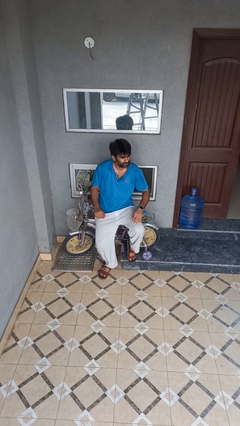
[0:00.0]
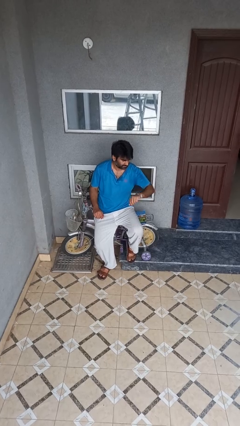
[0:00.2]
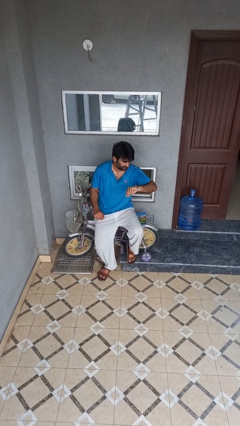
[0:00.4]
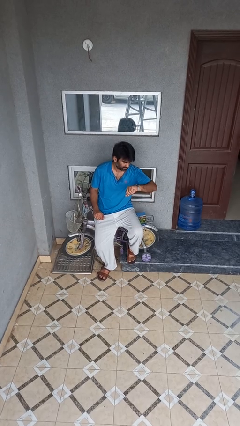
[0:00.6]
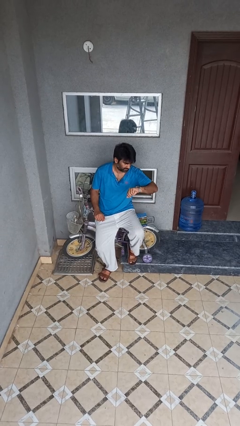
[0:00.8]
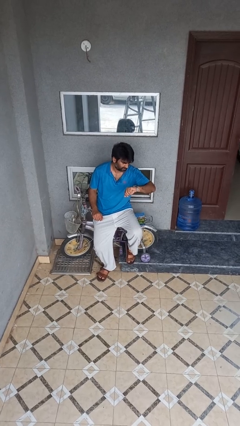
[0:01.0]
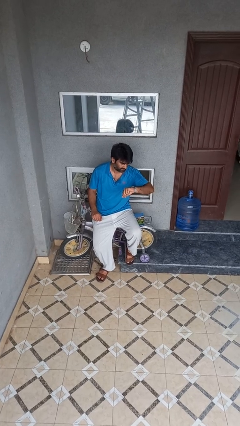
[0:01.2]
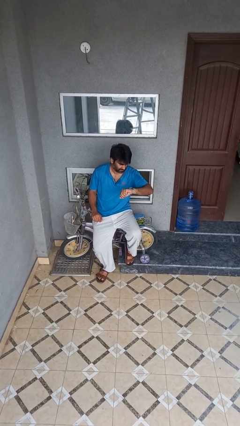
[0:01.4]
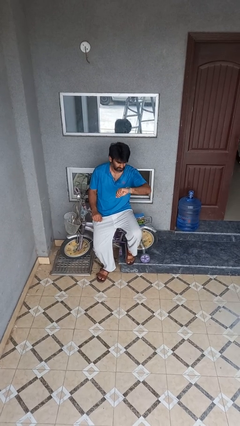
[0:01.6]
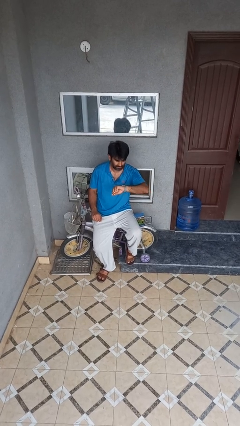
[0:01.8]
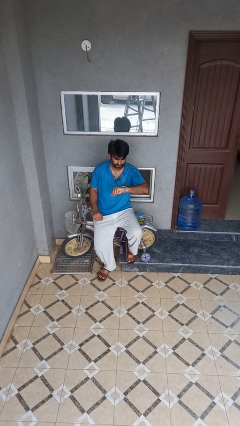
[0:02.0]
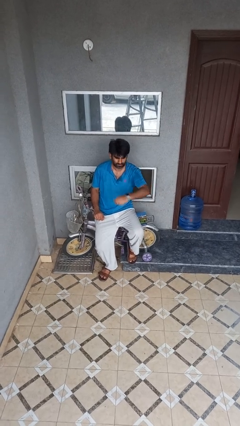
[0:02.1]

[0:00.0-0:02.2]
person looks at wristwatch

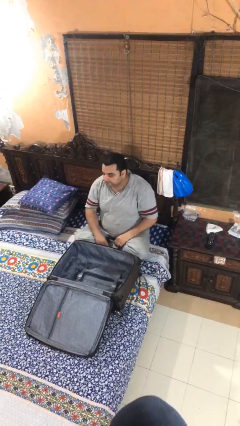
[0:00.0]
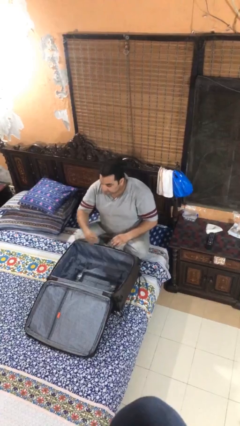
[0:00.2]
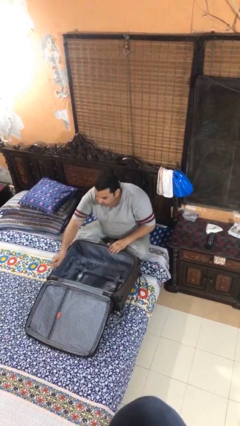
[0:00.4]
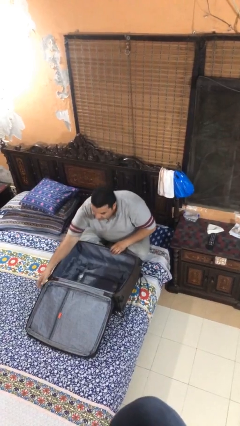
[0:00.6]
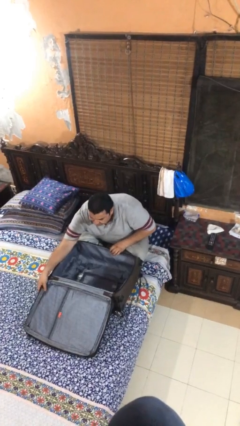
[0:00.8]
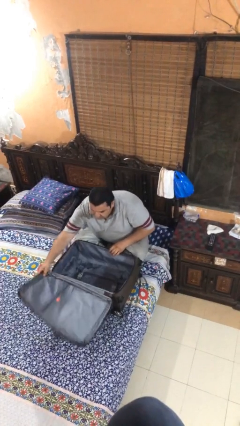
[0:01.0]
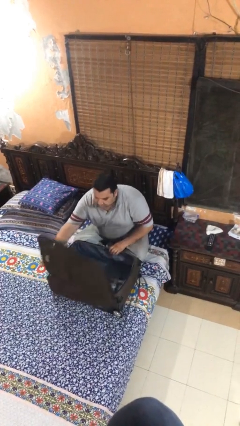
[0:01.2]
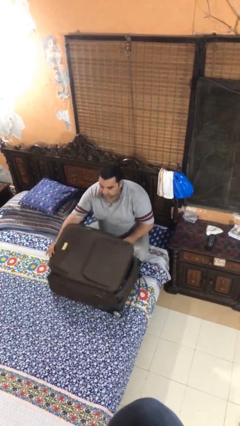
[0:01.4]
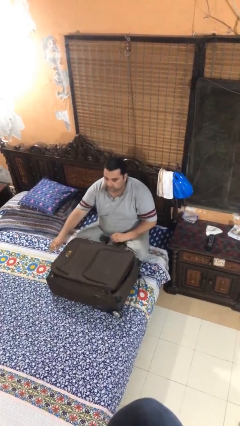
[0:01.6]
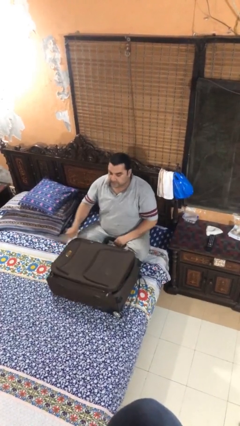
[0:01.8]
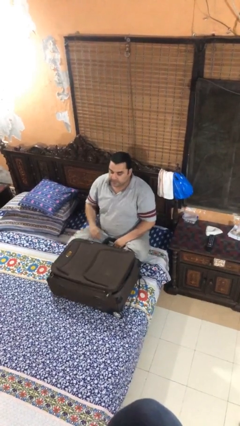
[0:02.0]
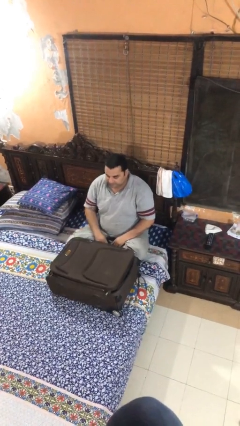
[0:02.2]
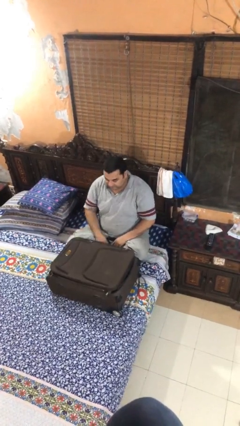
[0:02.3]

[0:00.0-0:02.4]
person closes suitcase

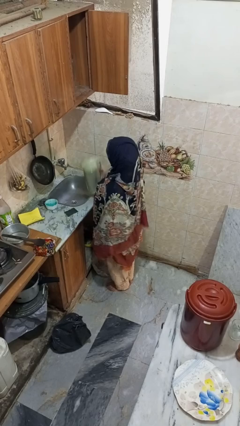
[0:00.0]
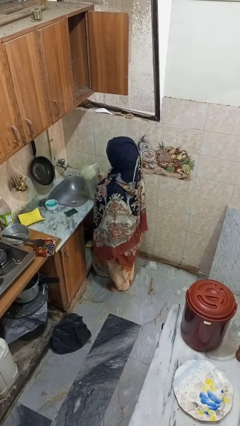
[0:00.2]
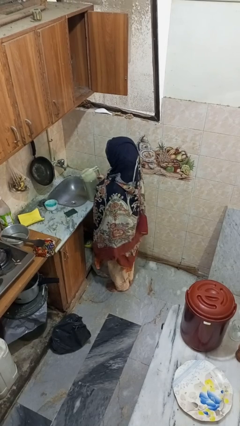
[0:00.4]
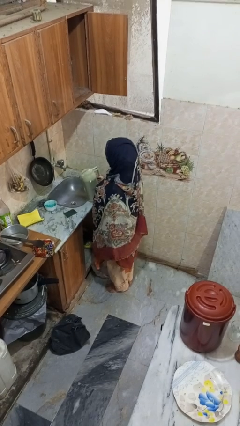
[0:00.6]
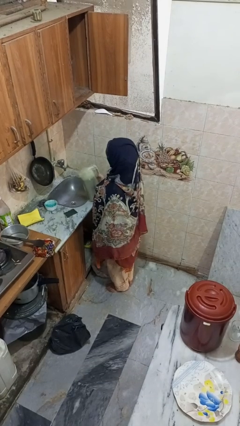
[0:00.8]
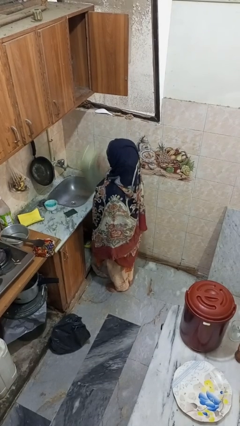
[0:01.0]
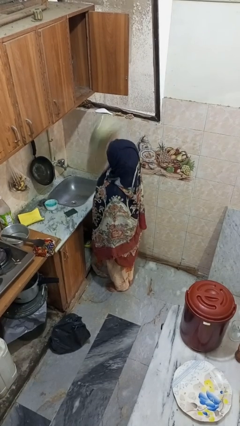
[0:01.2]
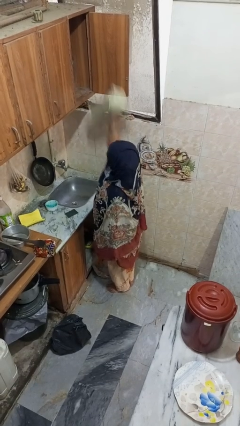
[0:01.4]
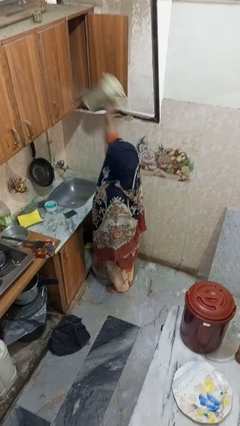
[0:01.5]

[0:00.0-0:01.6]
person takes object from cabinet

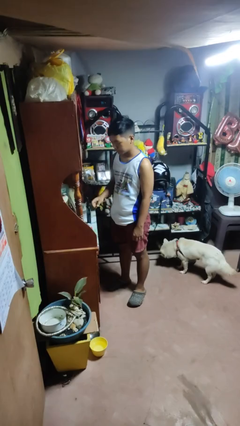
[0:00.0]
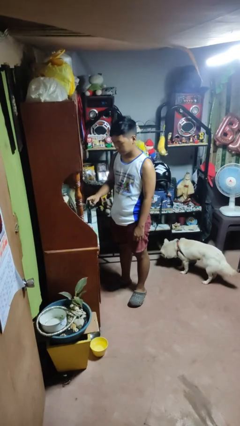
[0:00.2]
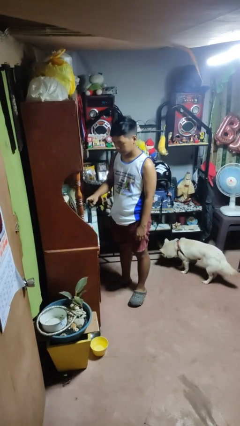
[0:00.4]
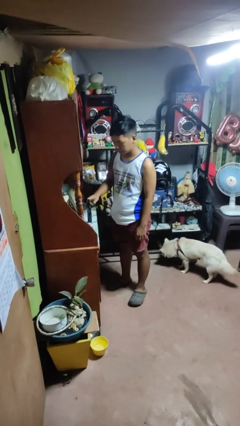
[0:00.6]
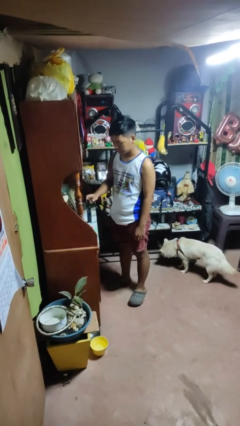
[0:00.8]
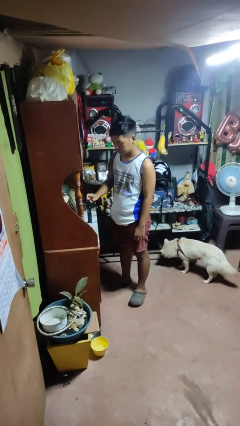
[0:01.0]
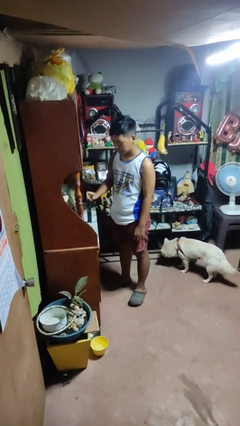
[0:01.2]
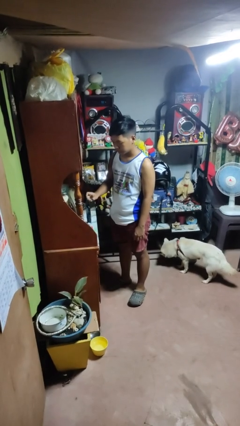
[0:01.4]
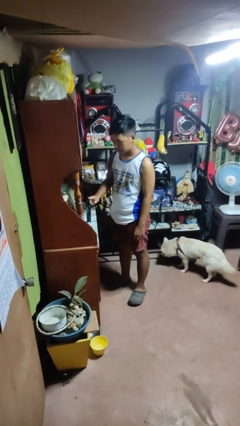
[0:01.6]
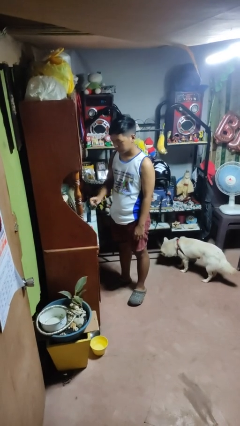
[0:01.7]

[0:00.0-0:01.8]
person taps object with finger

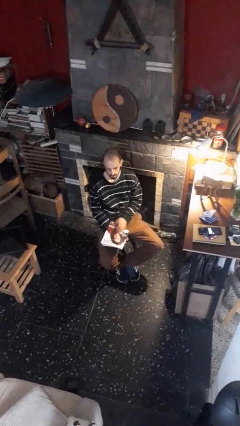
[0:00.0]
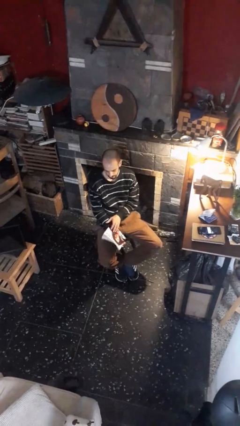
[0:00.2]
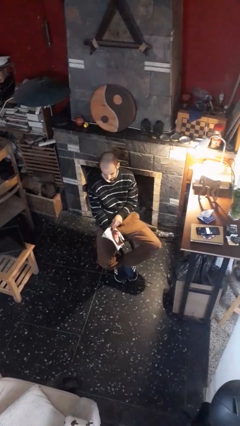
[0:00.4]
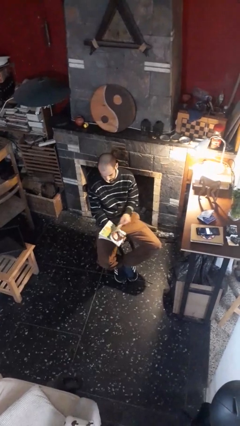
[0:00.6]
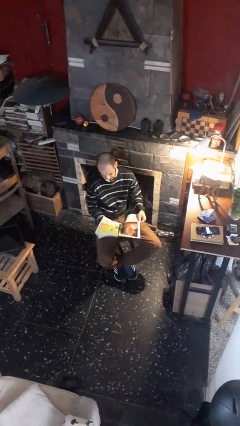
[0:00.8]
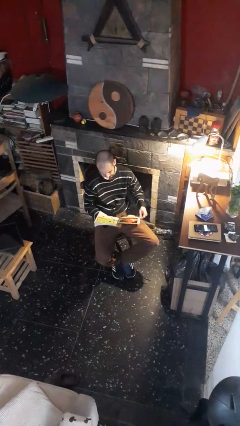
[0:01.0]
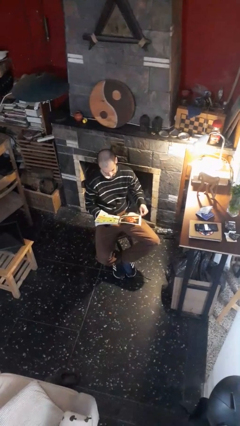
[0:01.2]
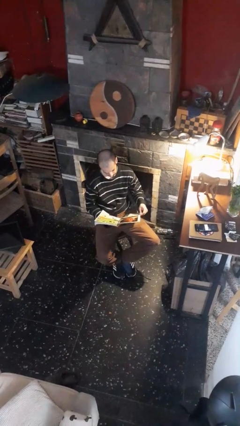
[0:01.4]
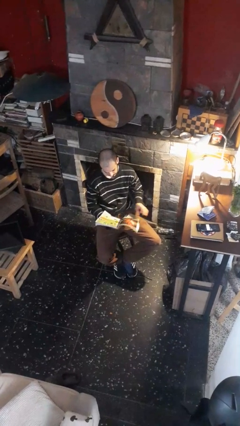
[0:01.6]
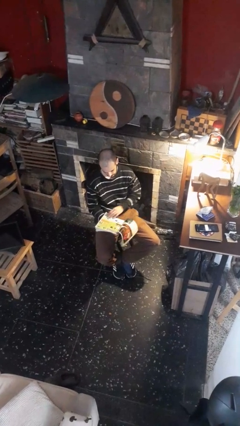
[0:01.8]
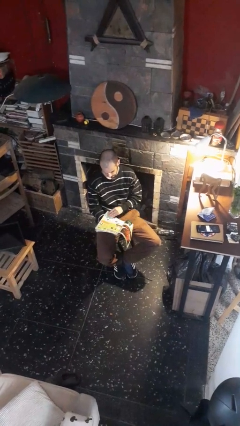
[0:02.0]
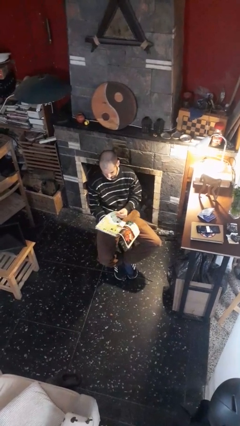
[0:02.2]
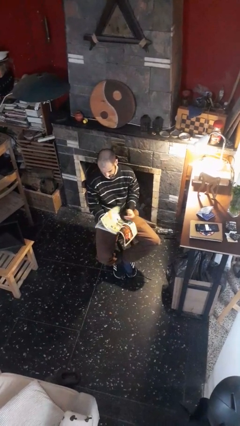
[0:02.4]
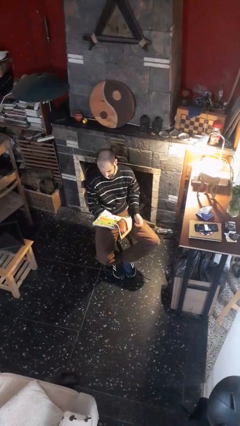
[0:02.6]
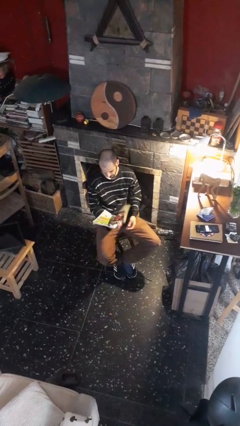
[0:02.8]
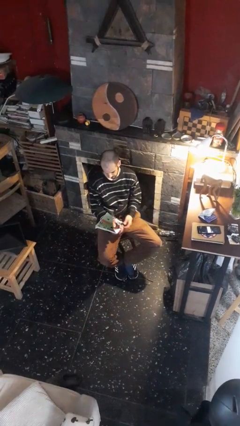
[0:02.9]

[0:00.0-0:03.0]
person reads magazine

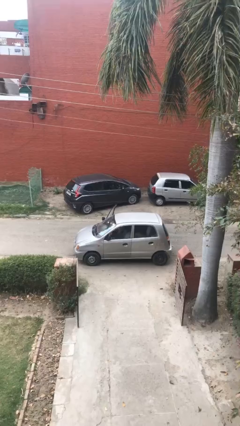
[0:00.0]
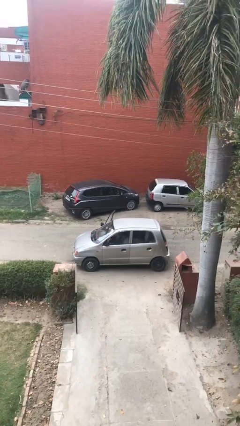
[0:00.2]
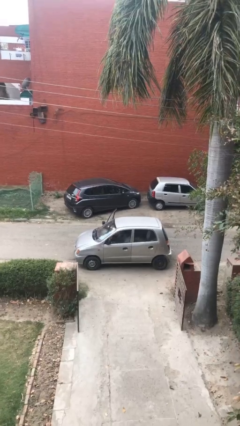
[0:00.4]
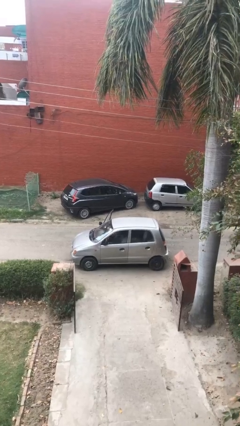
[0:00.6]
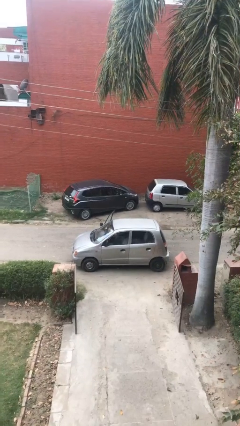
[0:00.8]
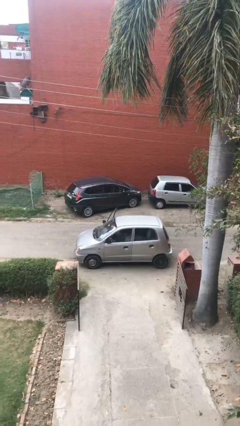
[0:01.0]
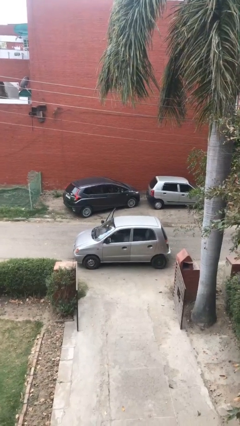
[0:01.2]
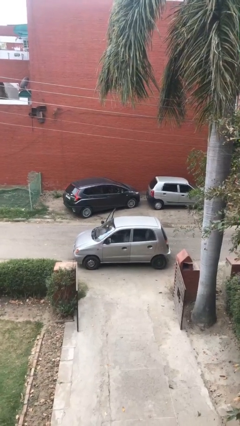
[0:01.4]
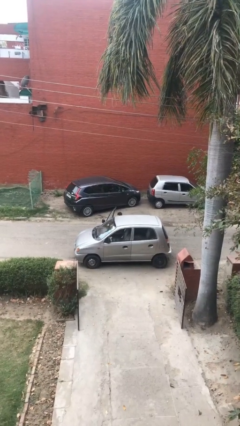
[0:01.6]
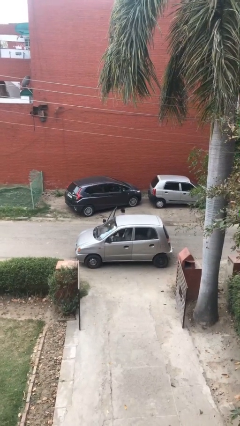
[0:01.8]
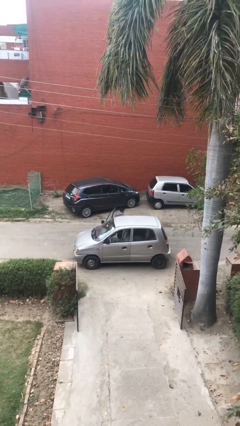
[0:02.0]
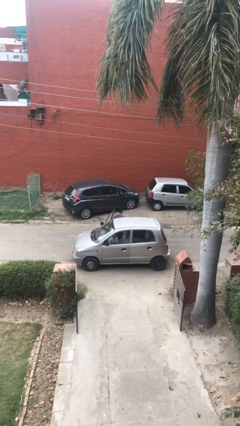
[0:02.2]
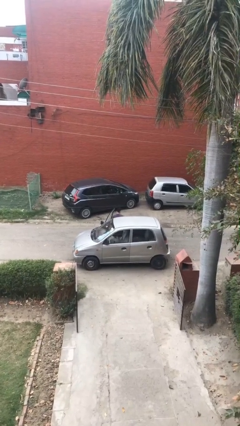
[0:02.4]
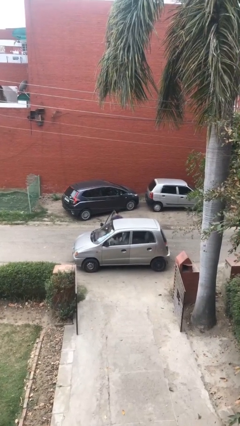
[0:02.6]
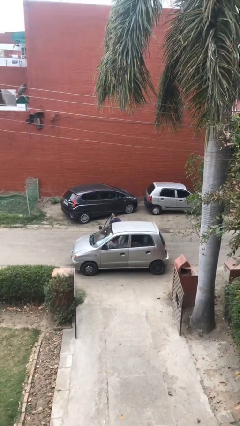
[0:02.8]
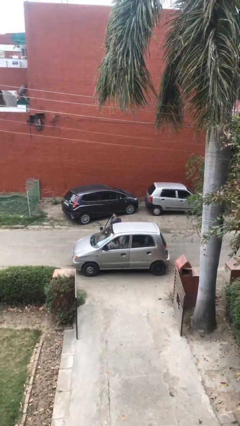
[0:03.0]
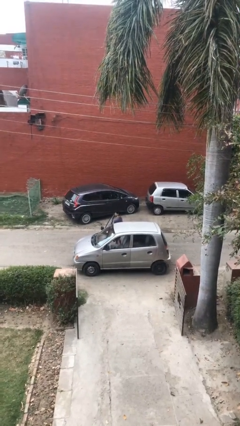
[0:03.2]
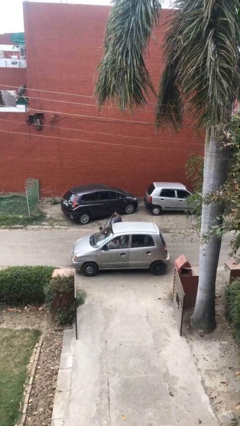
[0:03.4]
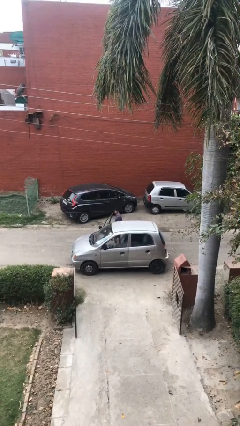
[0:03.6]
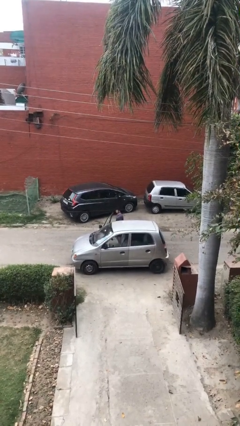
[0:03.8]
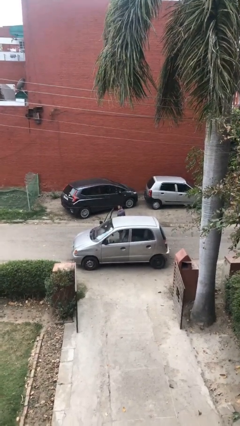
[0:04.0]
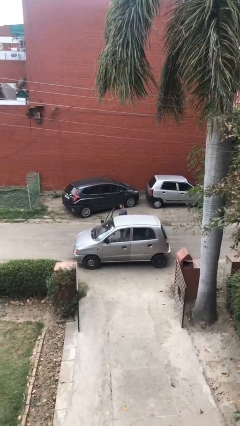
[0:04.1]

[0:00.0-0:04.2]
person exits car

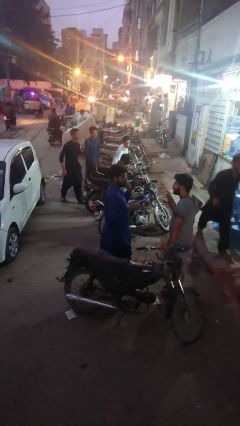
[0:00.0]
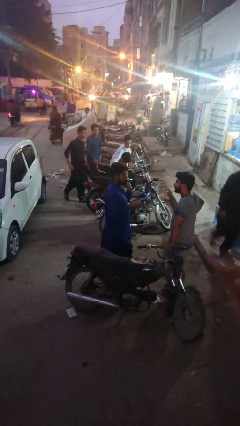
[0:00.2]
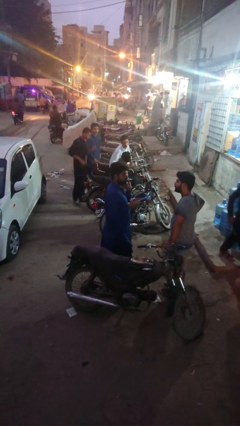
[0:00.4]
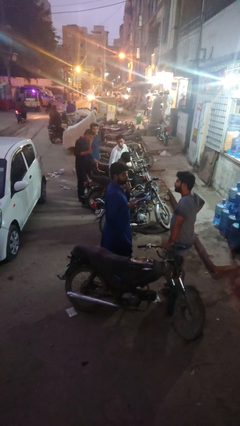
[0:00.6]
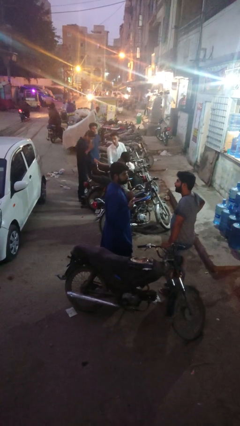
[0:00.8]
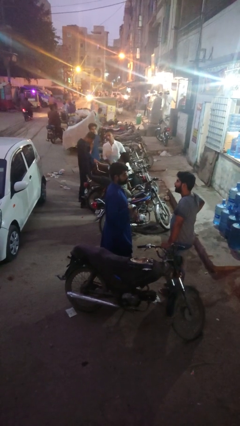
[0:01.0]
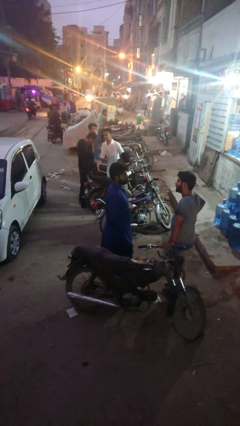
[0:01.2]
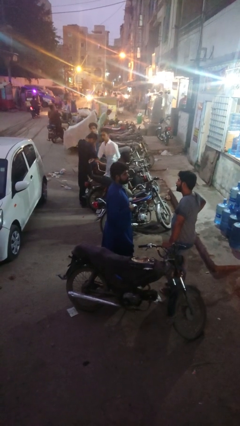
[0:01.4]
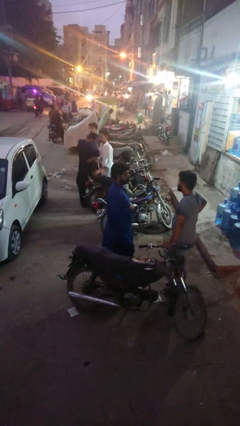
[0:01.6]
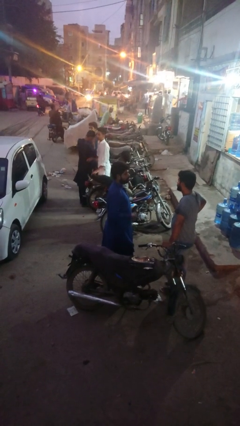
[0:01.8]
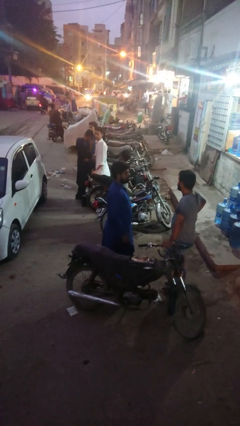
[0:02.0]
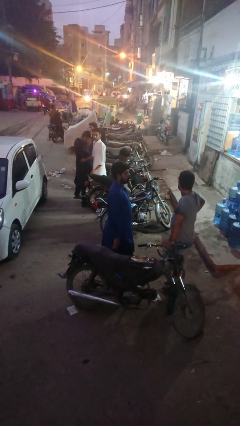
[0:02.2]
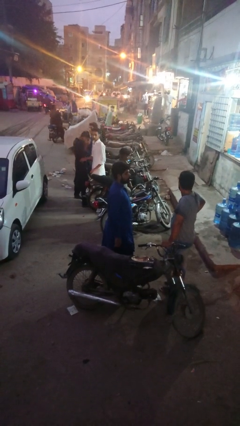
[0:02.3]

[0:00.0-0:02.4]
person talks to person
